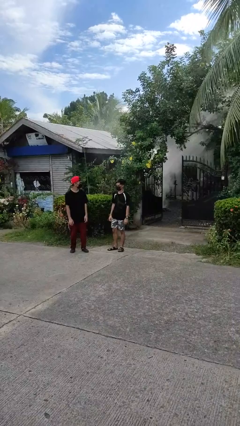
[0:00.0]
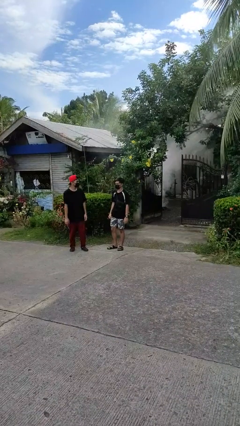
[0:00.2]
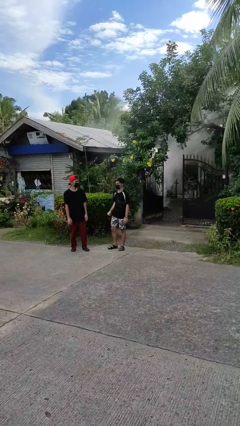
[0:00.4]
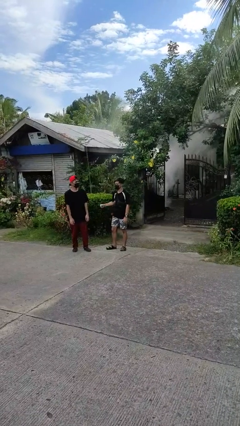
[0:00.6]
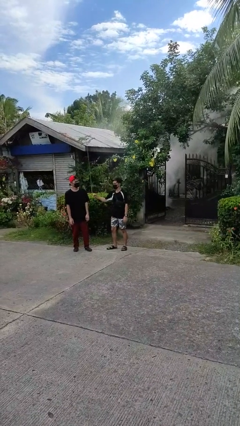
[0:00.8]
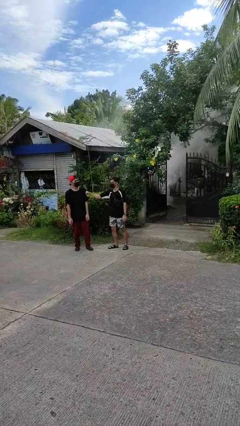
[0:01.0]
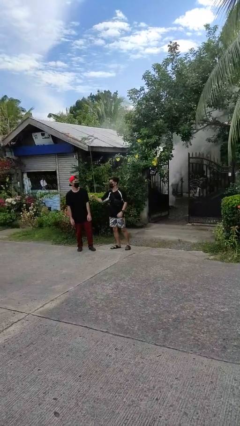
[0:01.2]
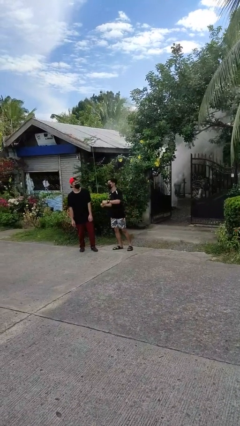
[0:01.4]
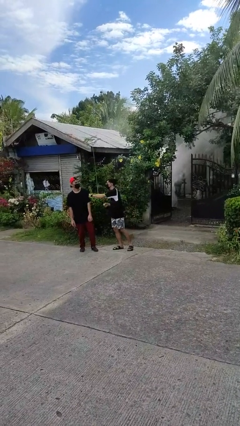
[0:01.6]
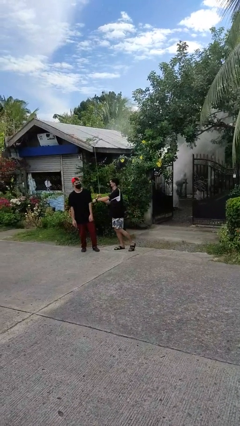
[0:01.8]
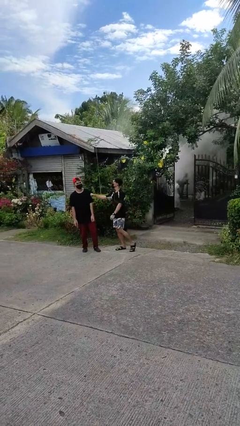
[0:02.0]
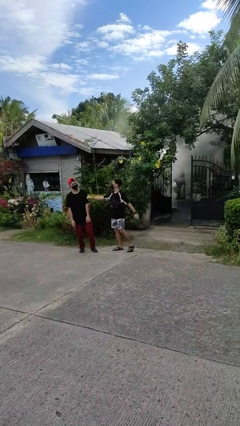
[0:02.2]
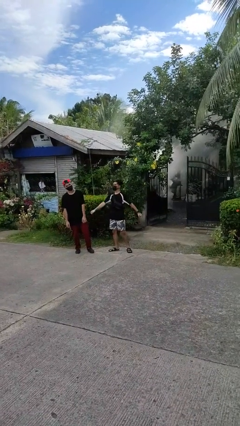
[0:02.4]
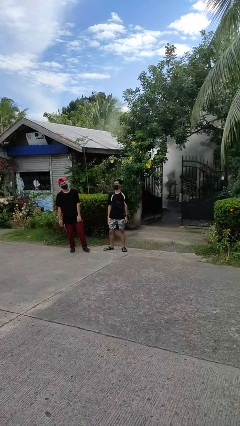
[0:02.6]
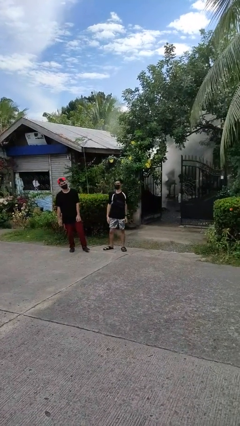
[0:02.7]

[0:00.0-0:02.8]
person pounds shoulders of person

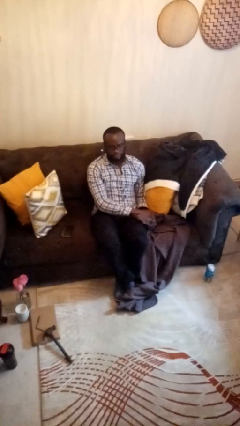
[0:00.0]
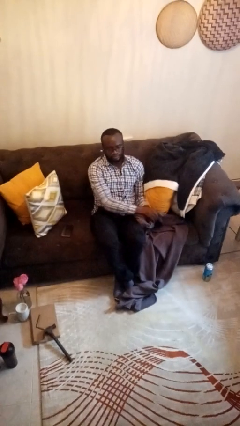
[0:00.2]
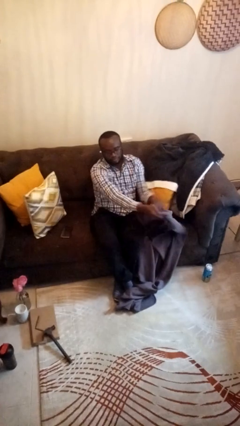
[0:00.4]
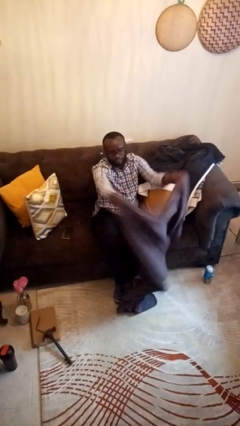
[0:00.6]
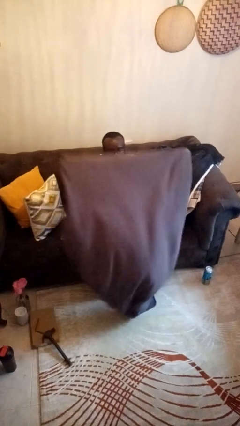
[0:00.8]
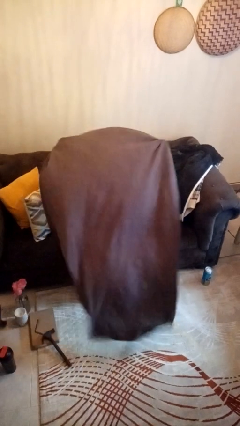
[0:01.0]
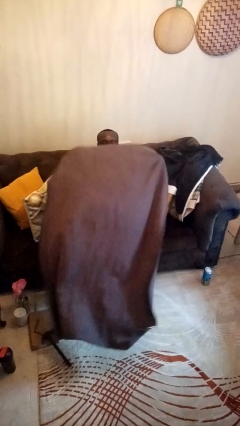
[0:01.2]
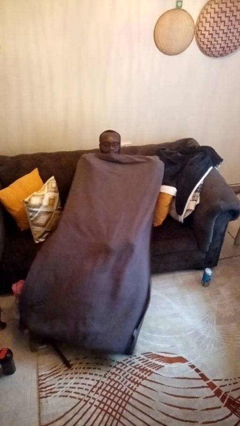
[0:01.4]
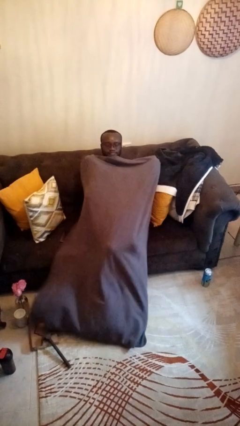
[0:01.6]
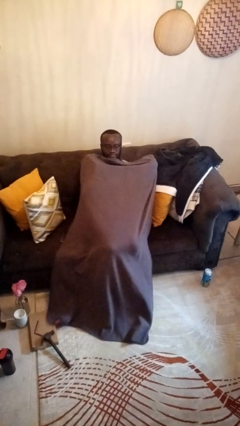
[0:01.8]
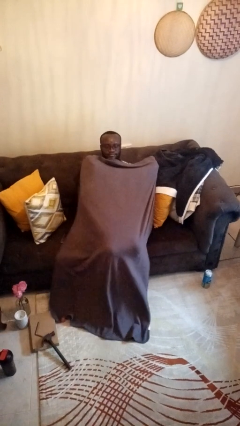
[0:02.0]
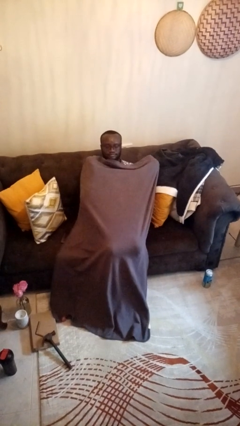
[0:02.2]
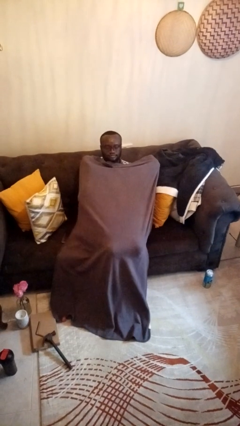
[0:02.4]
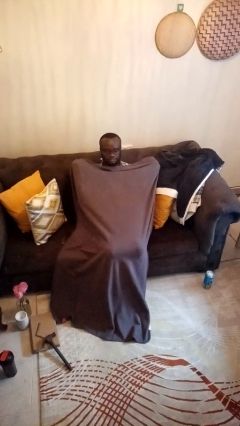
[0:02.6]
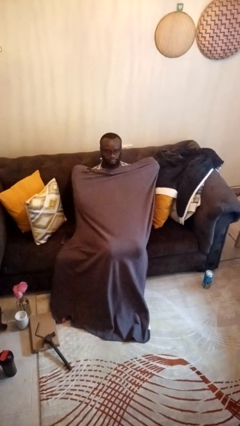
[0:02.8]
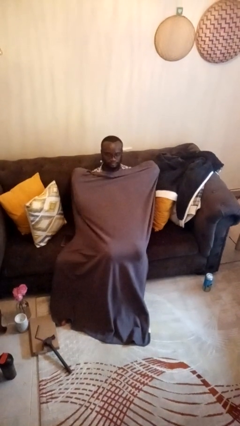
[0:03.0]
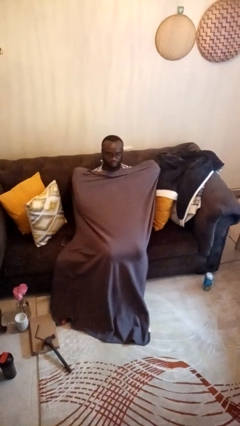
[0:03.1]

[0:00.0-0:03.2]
person covers with blanket

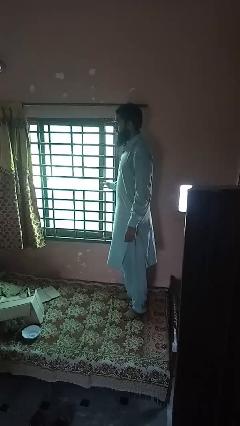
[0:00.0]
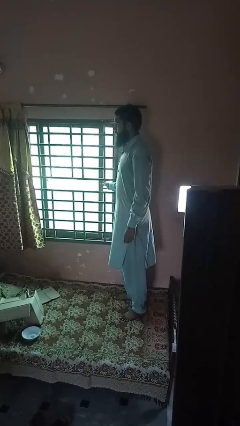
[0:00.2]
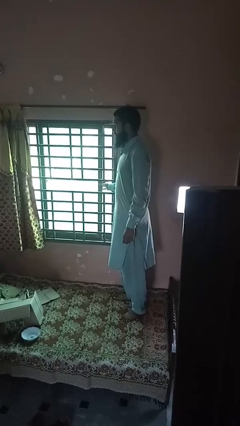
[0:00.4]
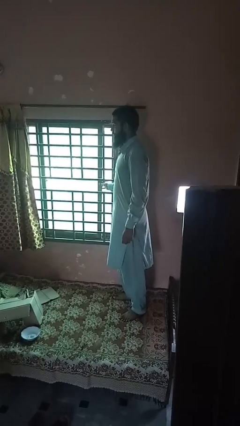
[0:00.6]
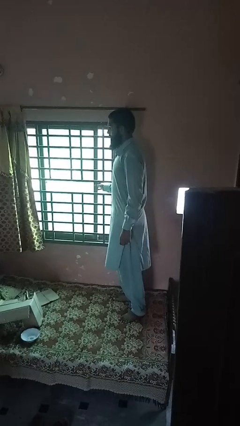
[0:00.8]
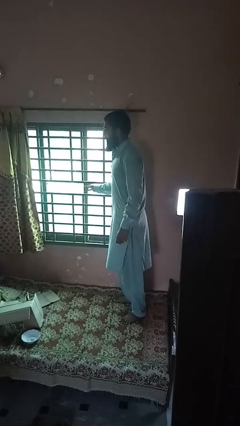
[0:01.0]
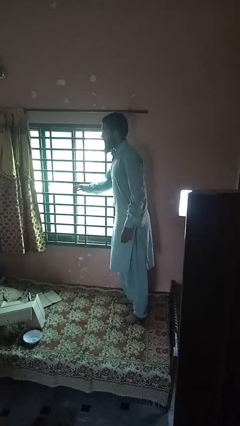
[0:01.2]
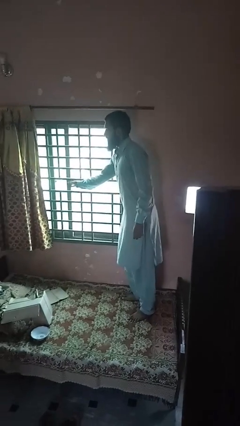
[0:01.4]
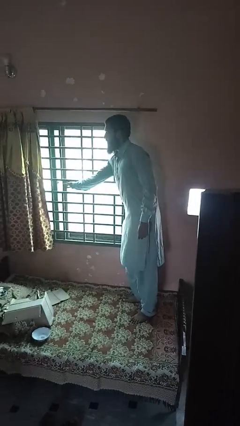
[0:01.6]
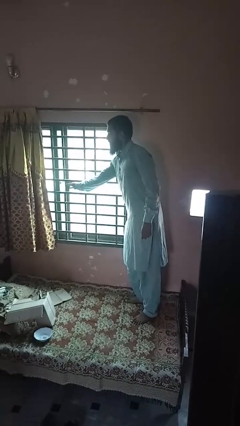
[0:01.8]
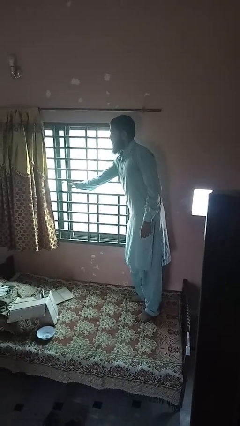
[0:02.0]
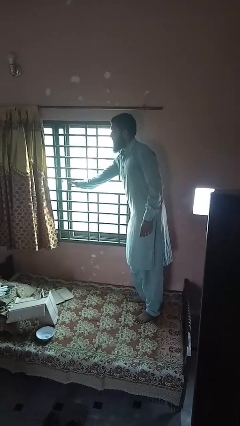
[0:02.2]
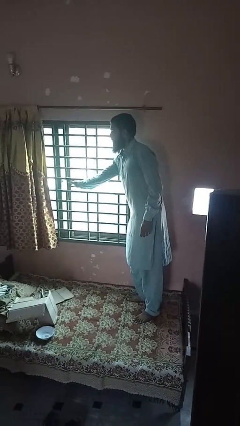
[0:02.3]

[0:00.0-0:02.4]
person opens home window

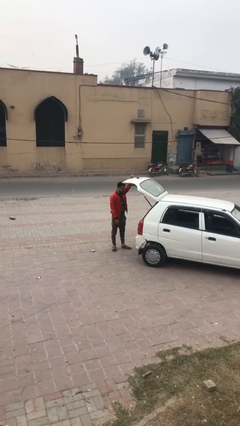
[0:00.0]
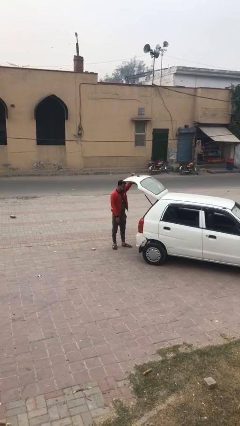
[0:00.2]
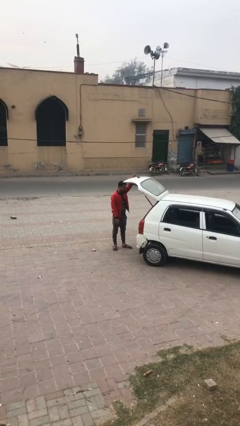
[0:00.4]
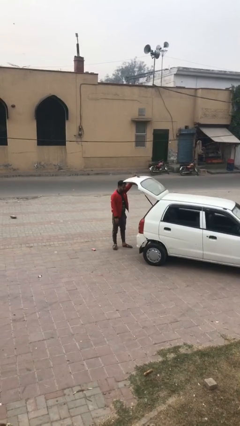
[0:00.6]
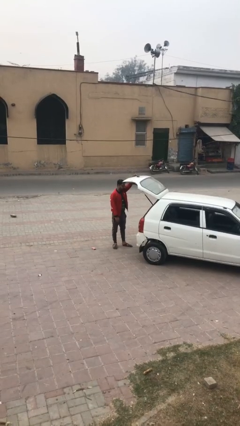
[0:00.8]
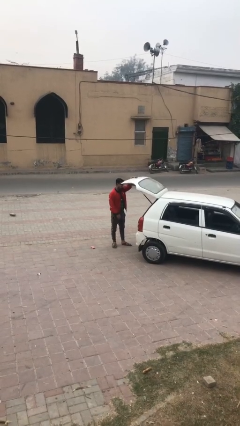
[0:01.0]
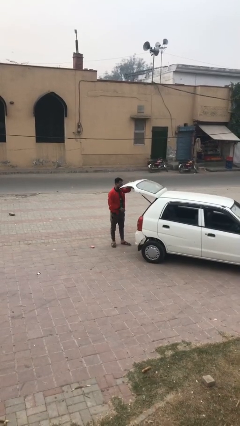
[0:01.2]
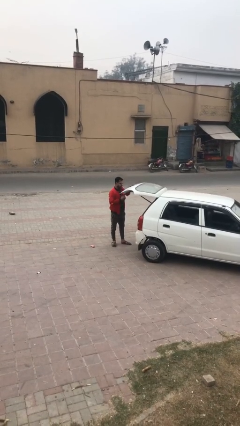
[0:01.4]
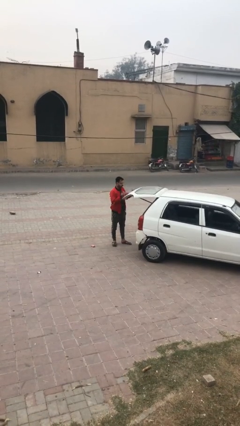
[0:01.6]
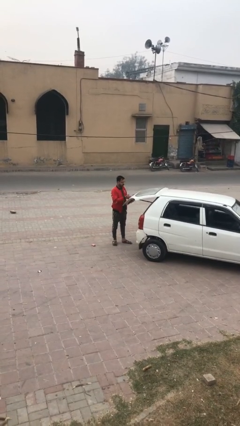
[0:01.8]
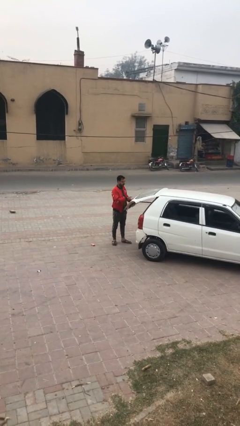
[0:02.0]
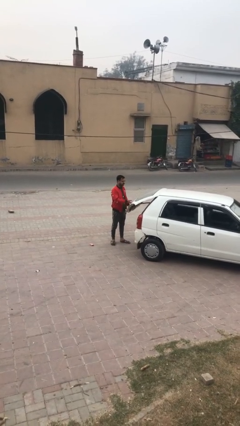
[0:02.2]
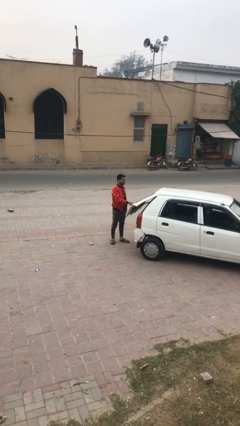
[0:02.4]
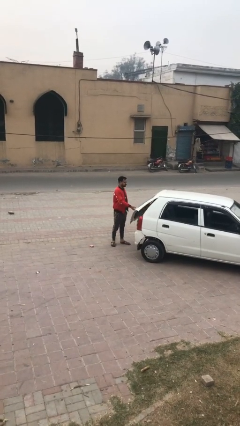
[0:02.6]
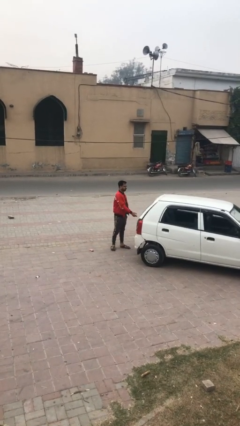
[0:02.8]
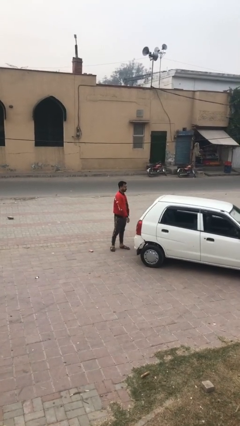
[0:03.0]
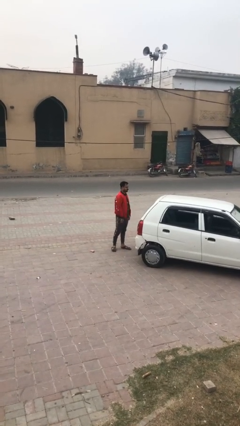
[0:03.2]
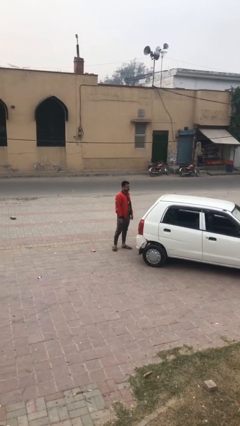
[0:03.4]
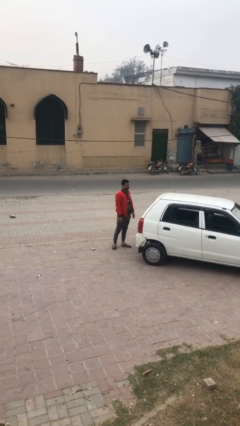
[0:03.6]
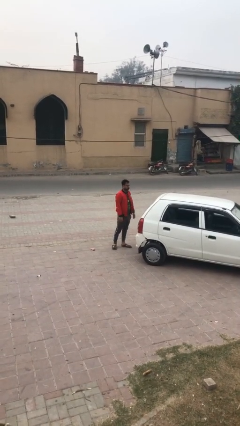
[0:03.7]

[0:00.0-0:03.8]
person closes car trunk

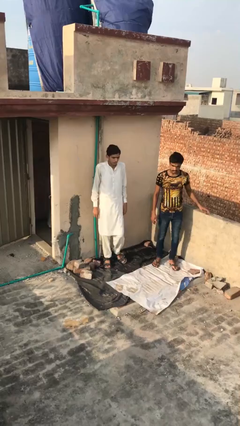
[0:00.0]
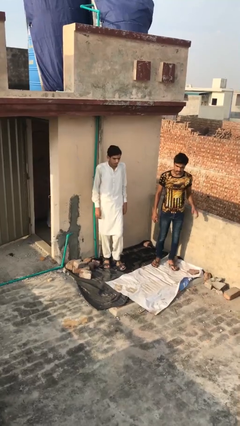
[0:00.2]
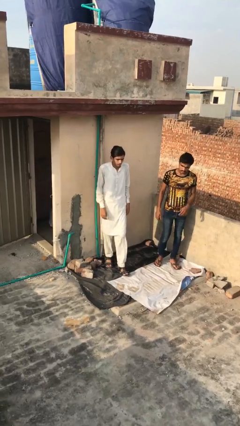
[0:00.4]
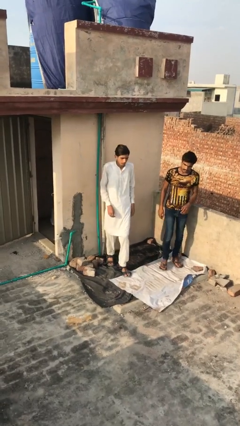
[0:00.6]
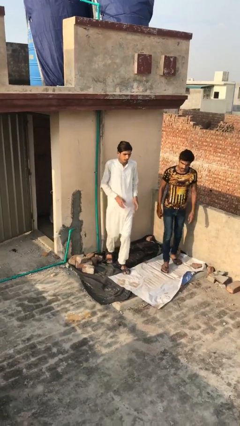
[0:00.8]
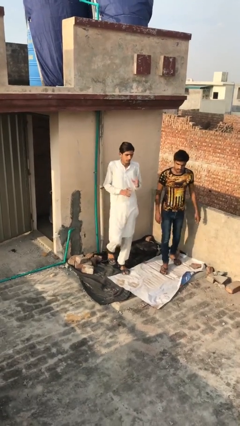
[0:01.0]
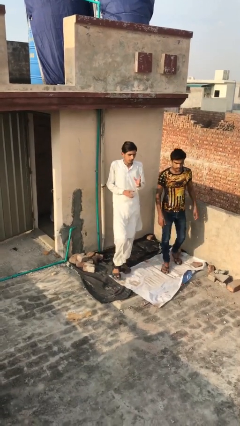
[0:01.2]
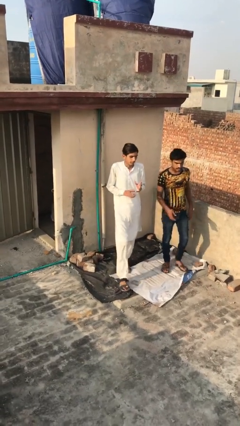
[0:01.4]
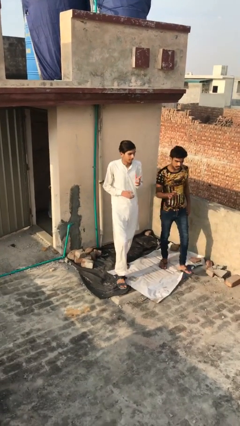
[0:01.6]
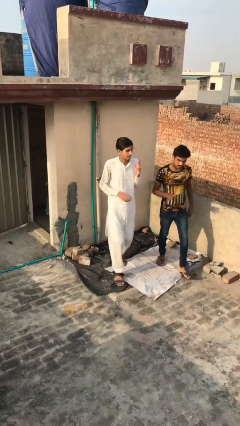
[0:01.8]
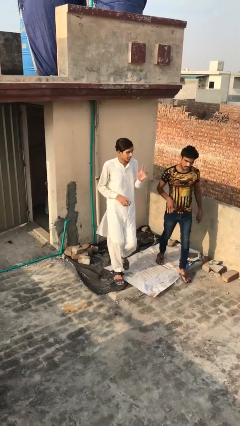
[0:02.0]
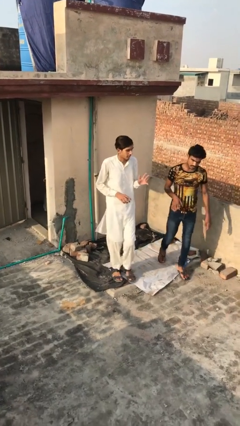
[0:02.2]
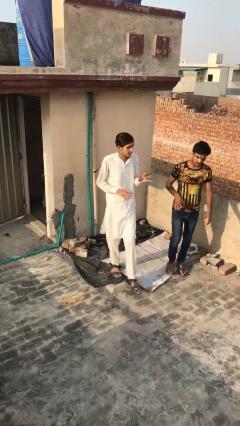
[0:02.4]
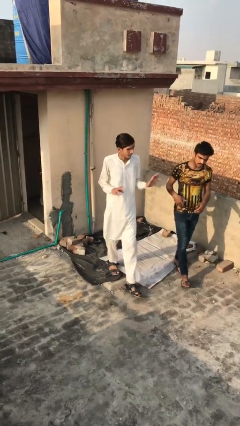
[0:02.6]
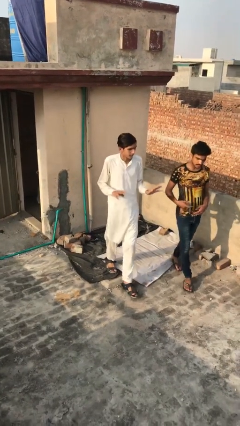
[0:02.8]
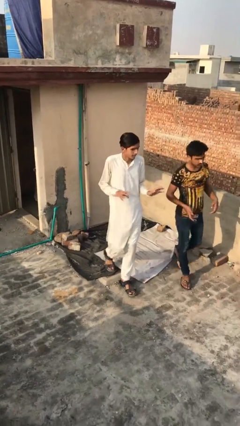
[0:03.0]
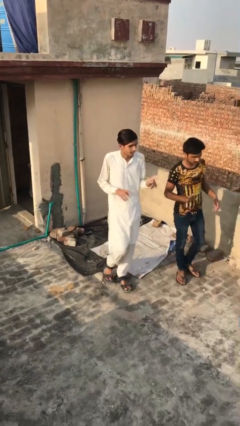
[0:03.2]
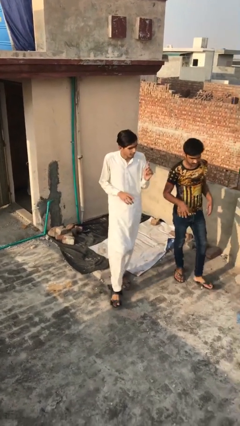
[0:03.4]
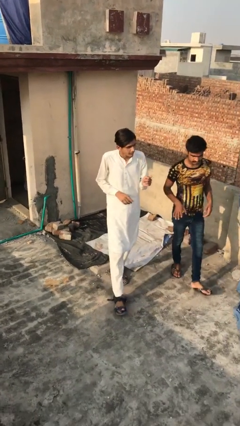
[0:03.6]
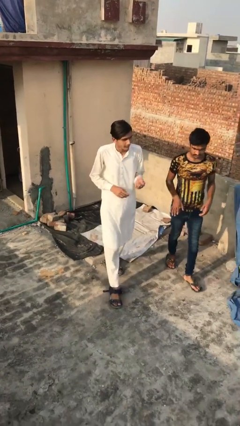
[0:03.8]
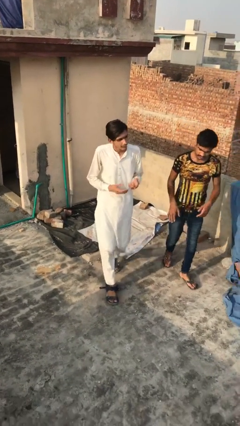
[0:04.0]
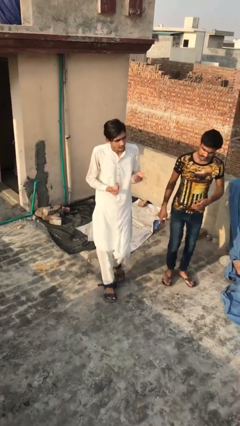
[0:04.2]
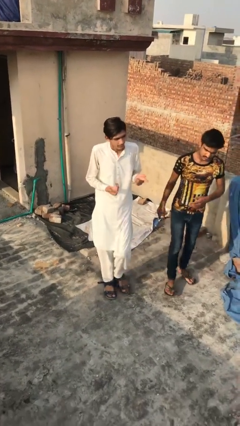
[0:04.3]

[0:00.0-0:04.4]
person talks to person

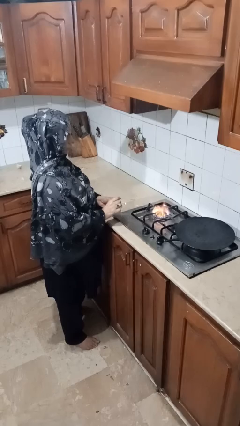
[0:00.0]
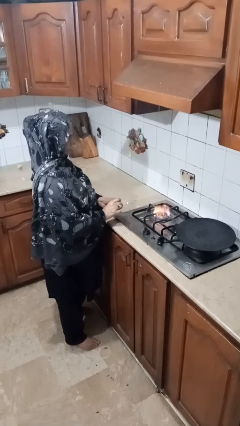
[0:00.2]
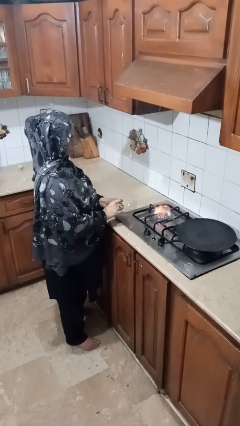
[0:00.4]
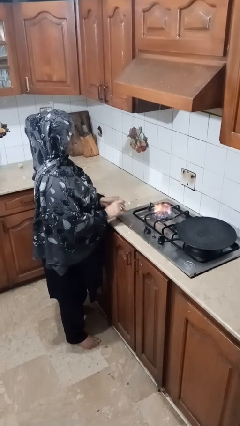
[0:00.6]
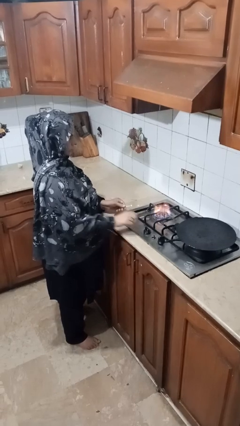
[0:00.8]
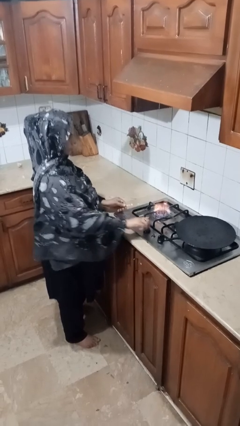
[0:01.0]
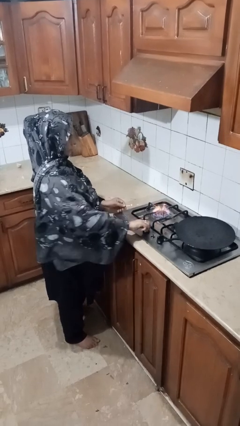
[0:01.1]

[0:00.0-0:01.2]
person turns off stovetop
